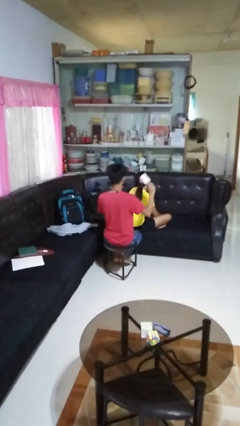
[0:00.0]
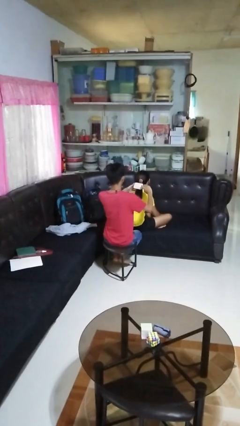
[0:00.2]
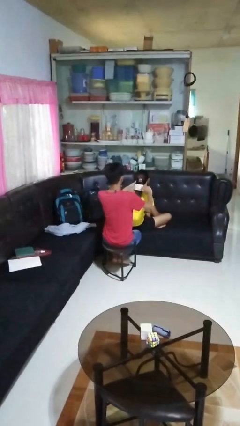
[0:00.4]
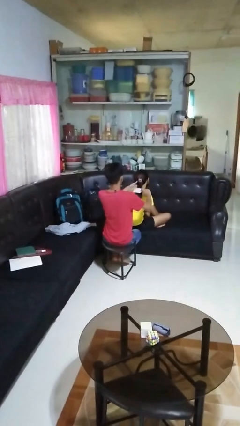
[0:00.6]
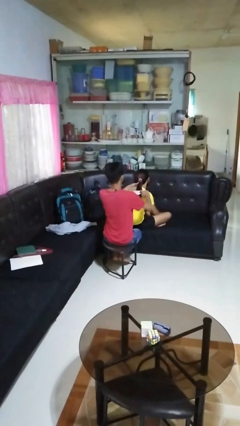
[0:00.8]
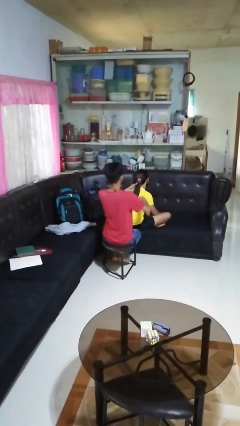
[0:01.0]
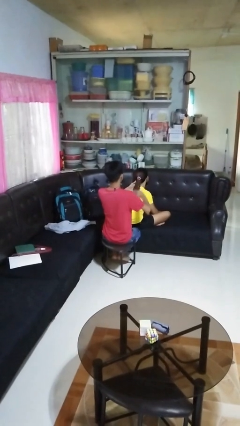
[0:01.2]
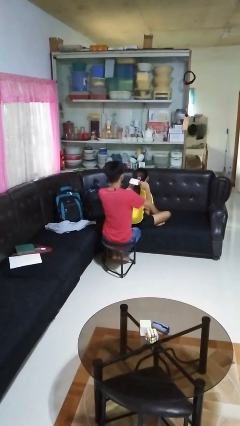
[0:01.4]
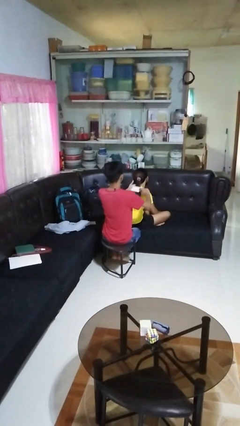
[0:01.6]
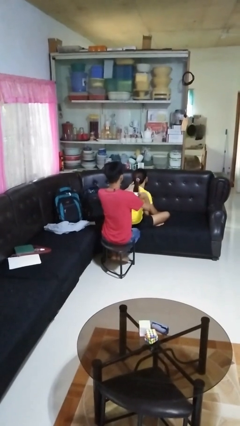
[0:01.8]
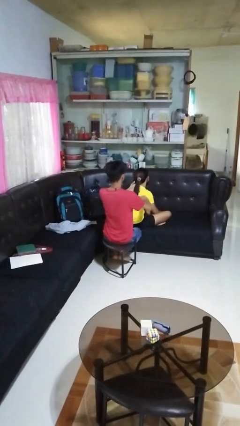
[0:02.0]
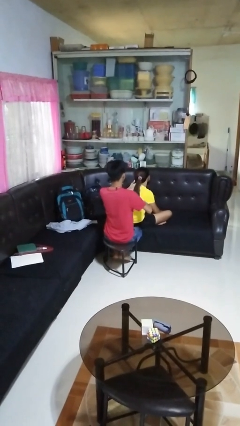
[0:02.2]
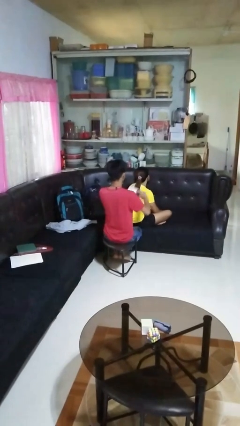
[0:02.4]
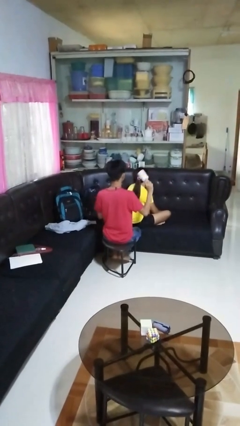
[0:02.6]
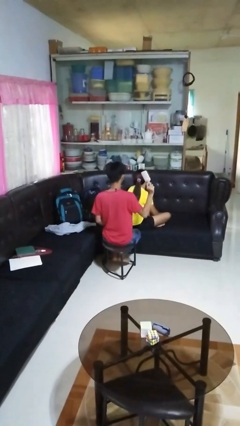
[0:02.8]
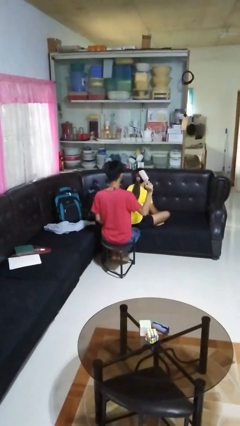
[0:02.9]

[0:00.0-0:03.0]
person brushes hair of person

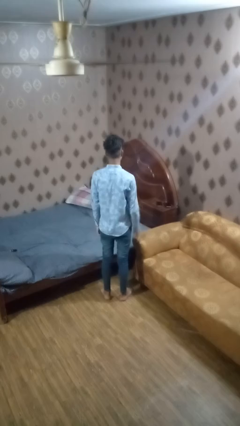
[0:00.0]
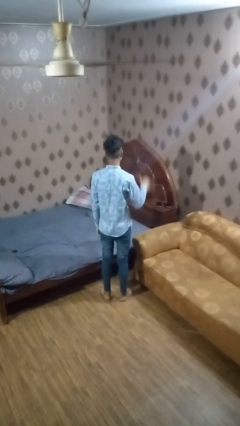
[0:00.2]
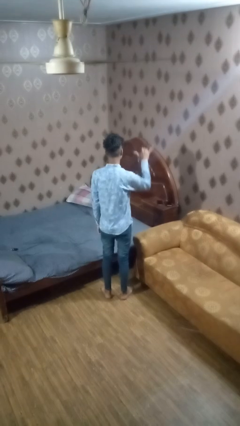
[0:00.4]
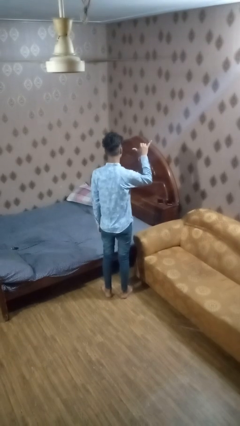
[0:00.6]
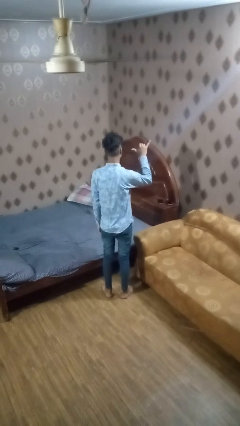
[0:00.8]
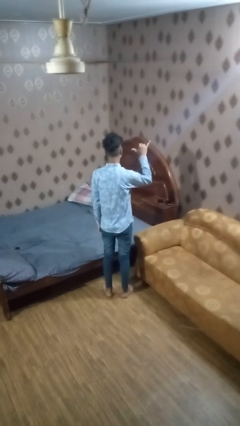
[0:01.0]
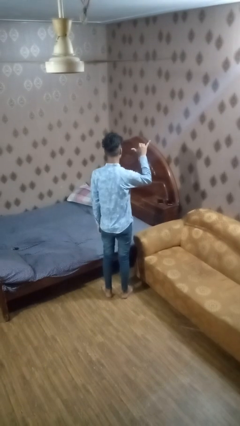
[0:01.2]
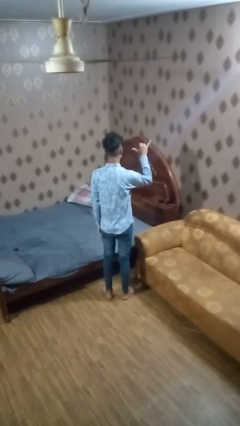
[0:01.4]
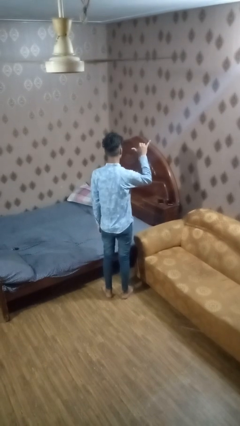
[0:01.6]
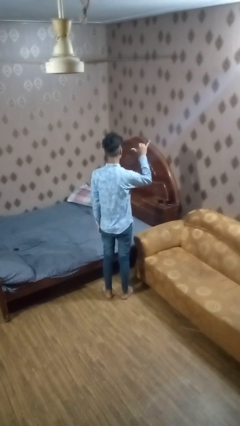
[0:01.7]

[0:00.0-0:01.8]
person gestures hang loose

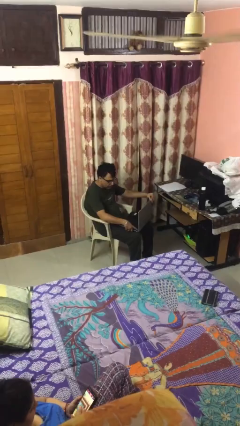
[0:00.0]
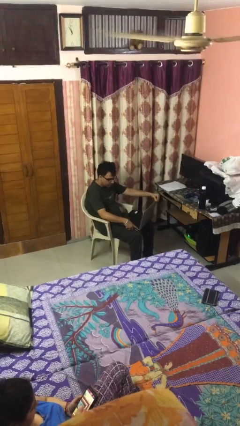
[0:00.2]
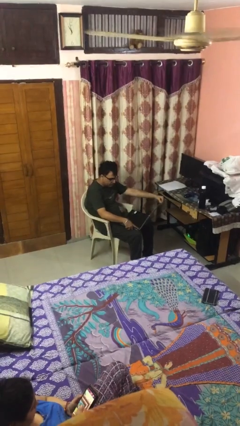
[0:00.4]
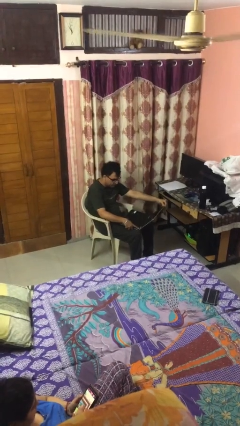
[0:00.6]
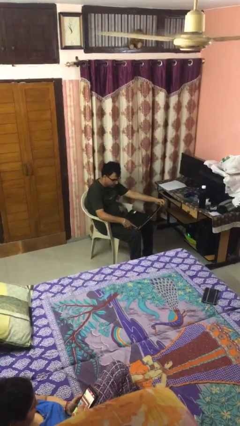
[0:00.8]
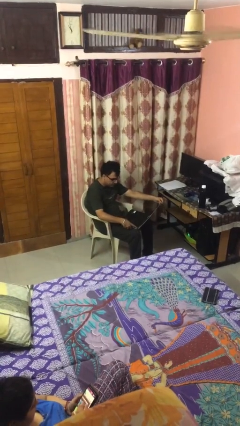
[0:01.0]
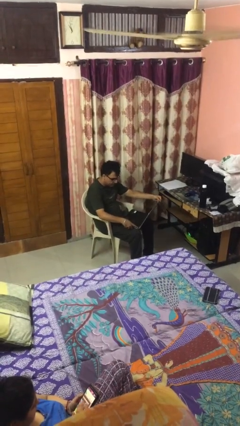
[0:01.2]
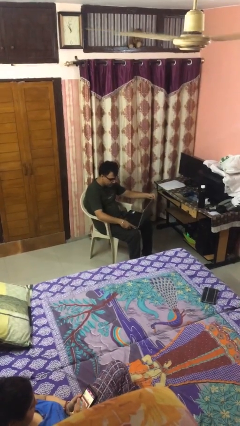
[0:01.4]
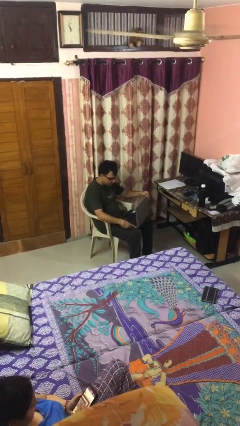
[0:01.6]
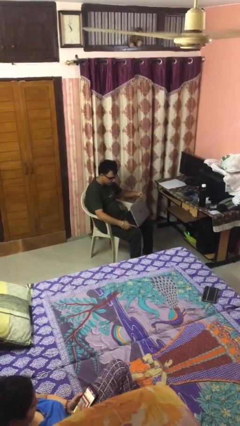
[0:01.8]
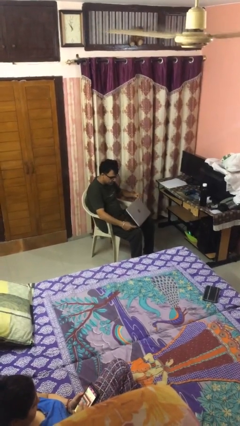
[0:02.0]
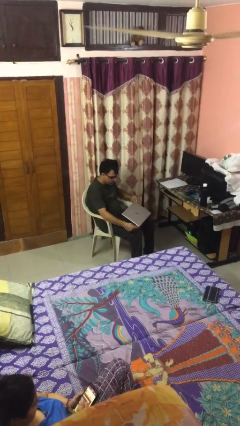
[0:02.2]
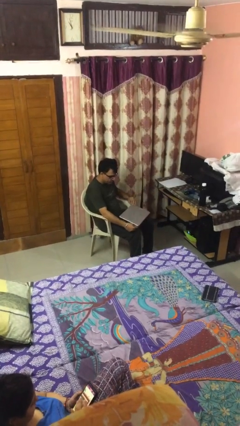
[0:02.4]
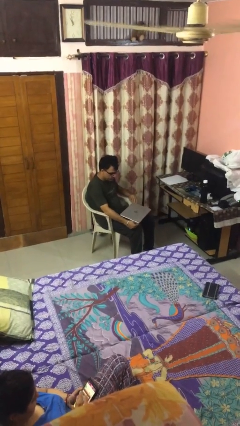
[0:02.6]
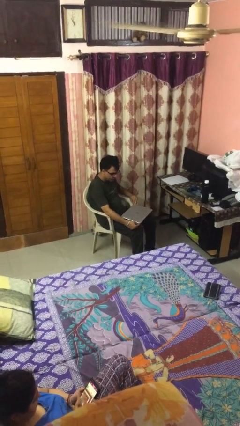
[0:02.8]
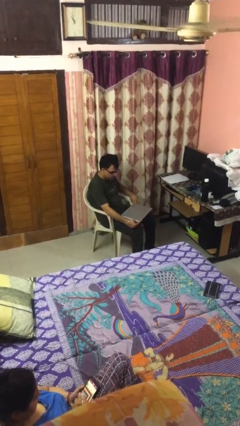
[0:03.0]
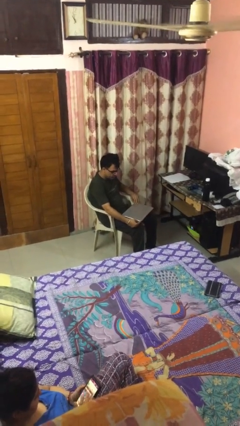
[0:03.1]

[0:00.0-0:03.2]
person closes laptop

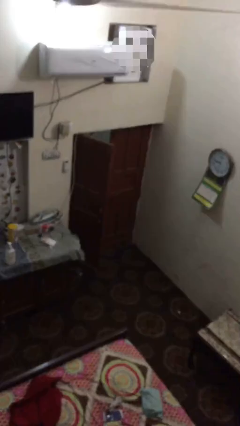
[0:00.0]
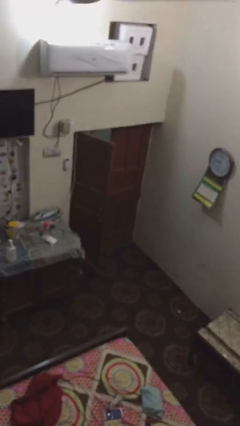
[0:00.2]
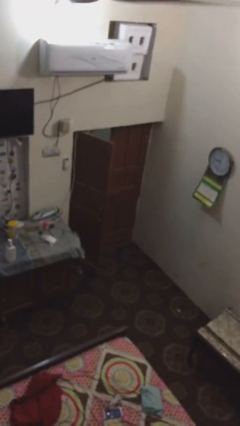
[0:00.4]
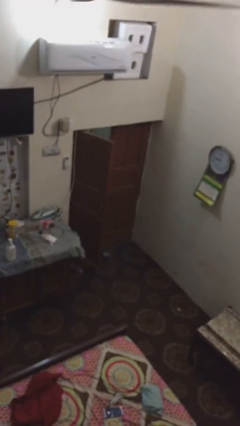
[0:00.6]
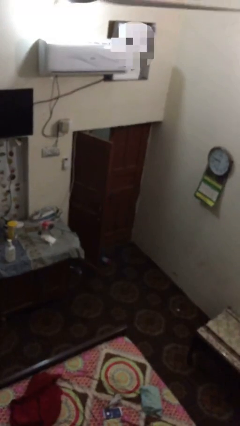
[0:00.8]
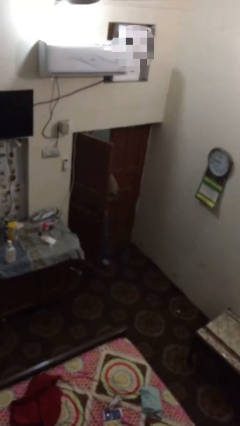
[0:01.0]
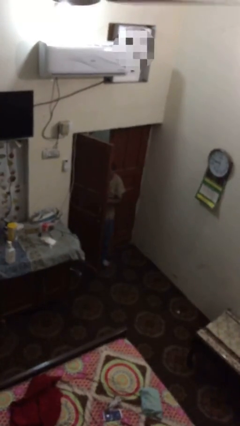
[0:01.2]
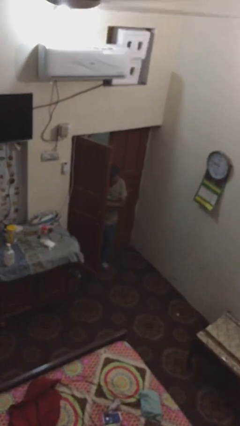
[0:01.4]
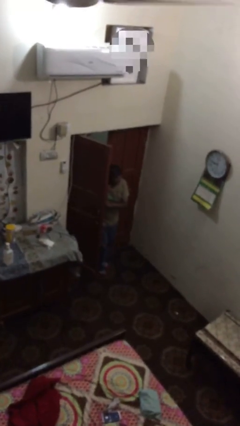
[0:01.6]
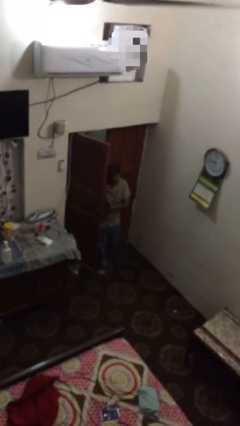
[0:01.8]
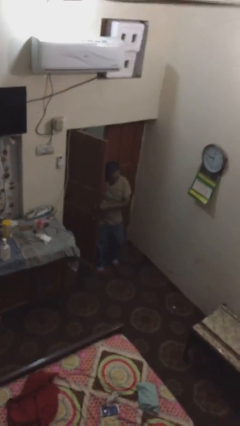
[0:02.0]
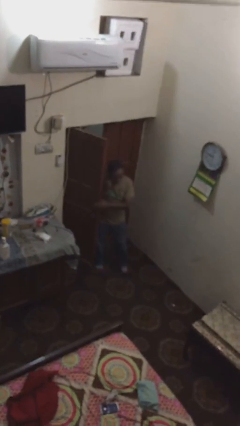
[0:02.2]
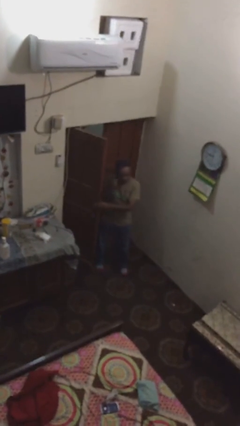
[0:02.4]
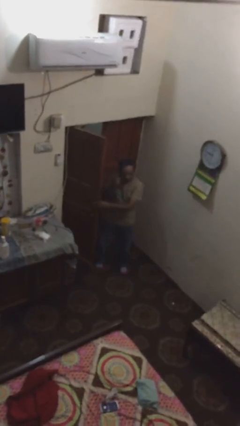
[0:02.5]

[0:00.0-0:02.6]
person enters scene through structure

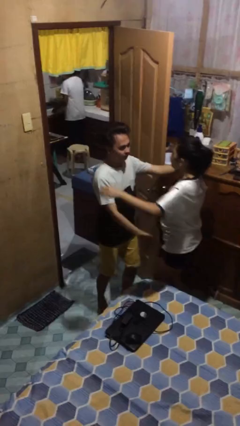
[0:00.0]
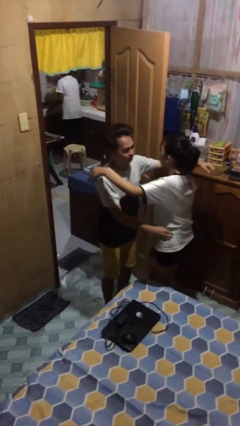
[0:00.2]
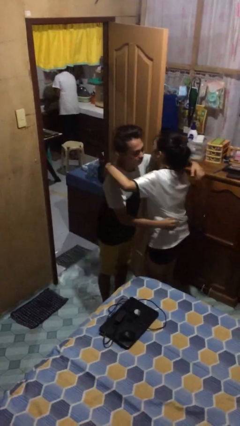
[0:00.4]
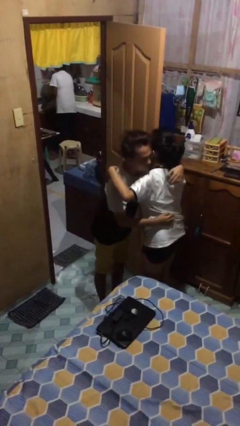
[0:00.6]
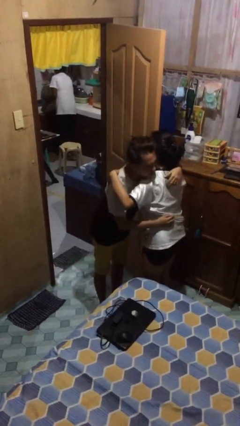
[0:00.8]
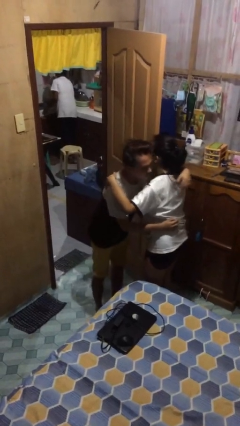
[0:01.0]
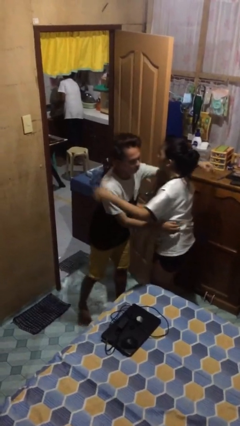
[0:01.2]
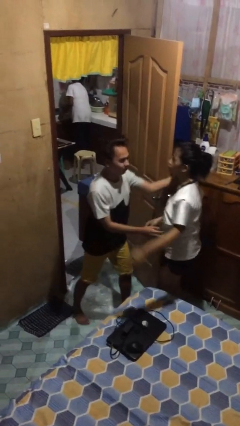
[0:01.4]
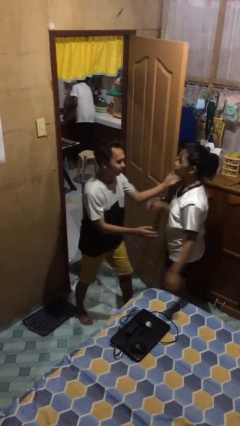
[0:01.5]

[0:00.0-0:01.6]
person embraces person

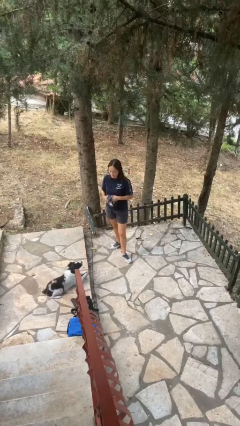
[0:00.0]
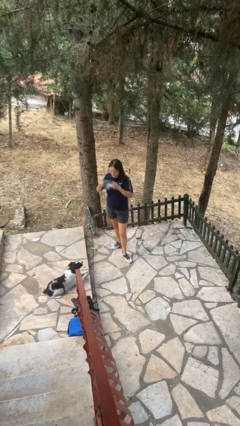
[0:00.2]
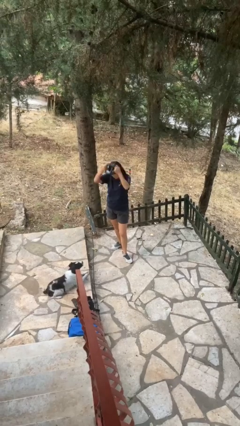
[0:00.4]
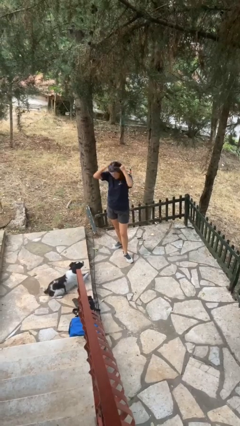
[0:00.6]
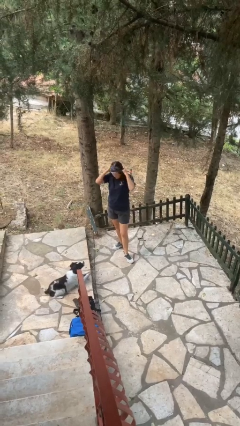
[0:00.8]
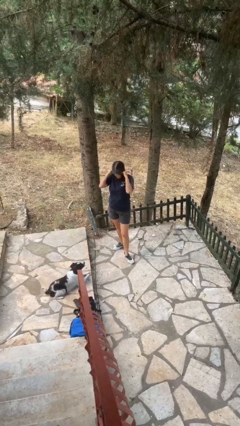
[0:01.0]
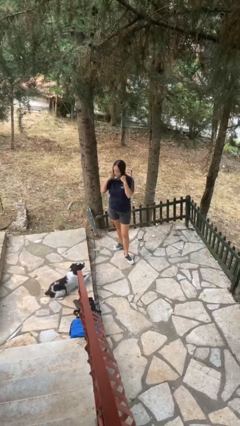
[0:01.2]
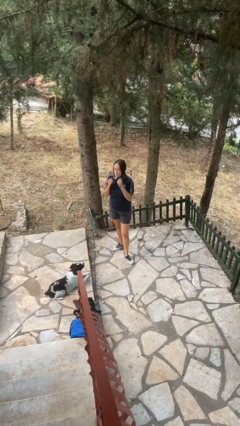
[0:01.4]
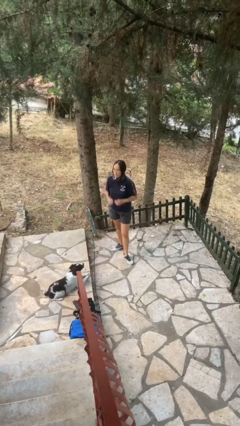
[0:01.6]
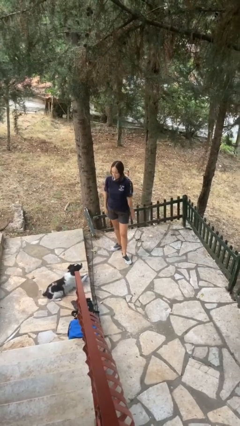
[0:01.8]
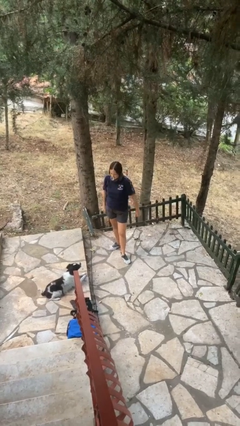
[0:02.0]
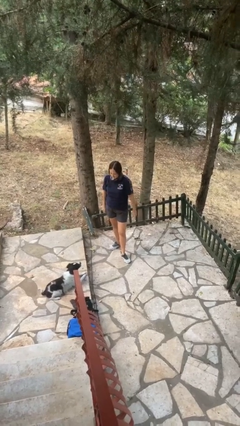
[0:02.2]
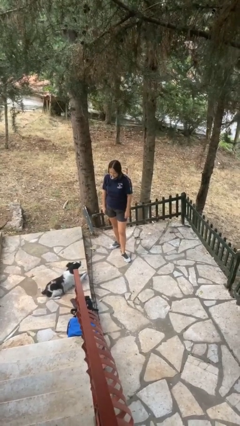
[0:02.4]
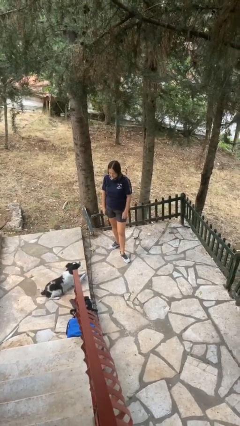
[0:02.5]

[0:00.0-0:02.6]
person puts on scarf

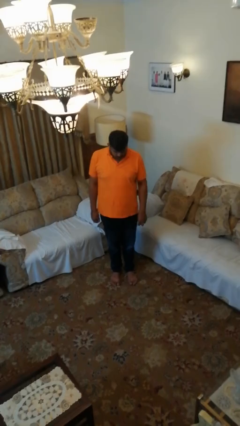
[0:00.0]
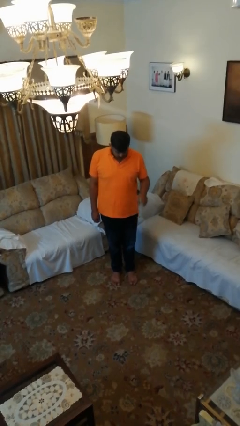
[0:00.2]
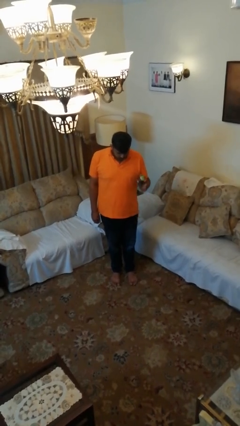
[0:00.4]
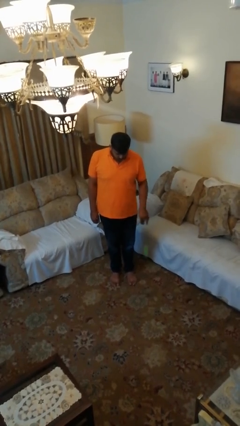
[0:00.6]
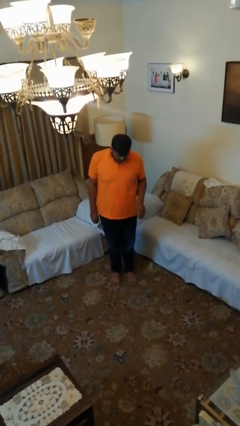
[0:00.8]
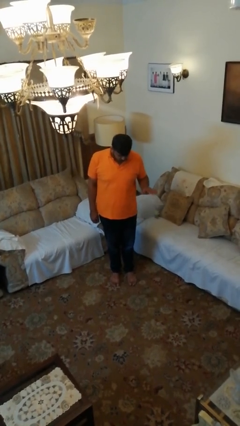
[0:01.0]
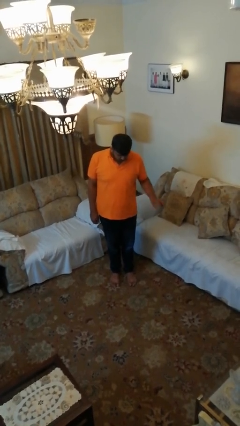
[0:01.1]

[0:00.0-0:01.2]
person bounces ball on floor

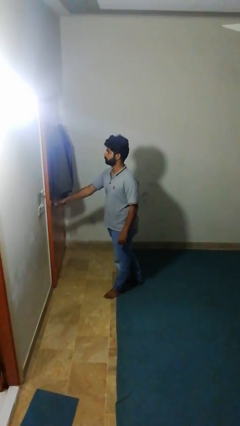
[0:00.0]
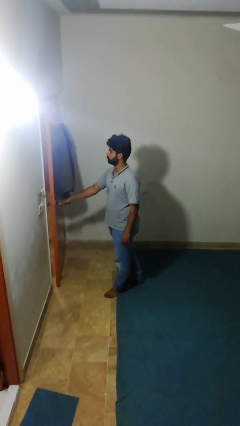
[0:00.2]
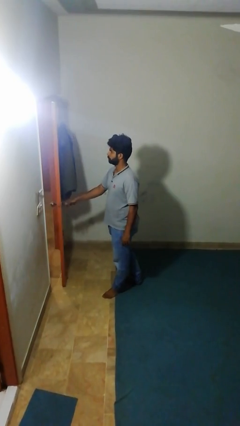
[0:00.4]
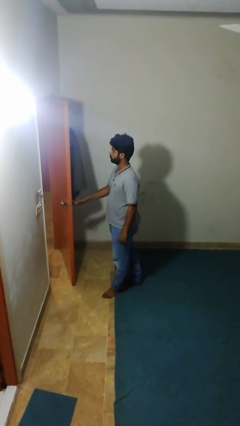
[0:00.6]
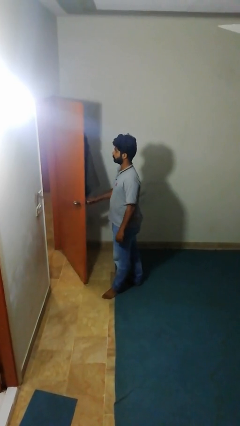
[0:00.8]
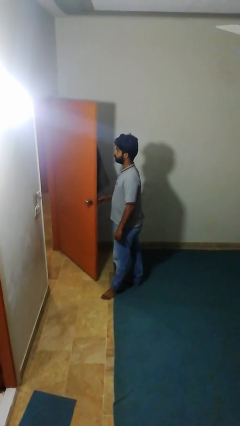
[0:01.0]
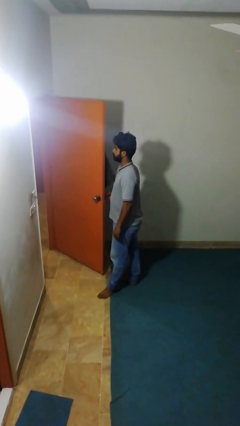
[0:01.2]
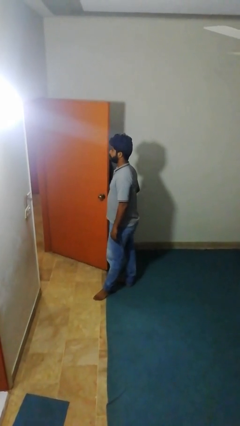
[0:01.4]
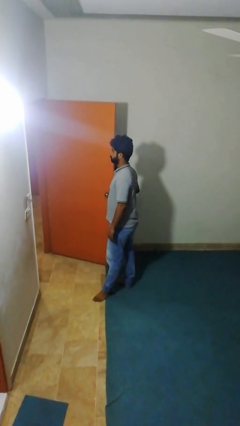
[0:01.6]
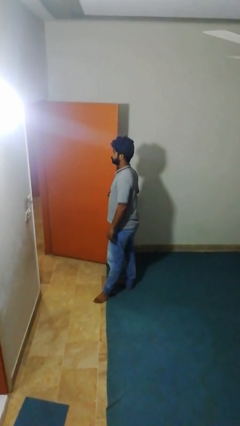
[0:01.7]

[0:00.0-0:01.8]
person opens facility door
